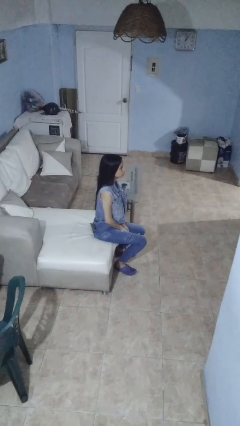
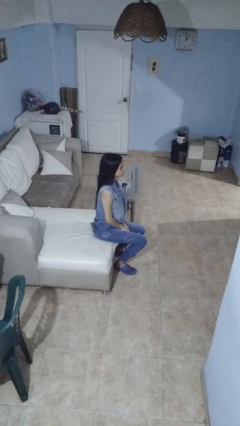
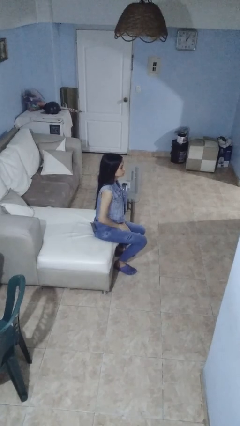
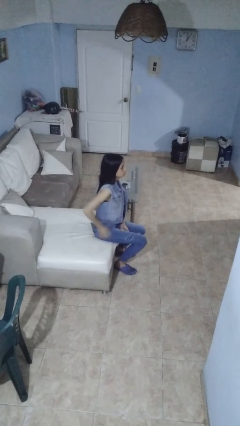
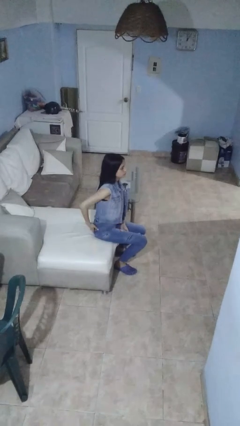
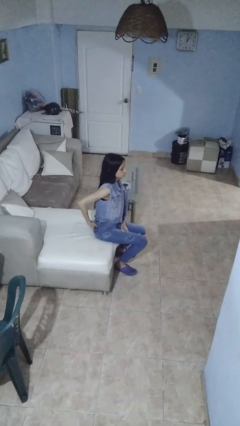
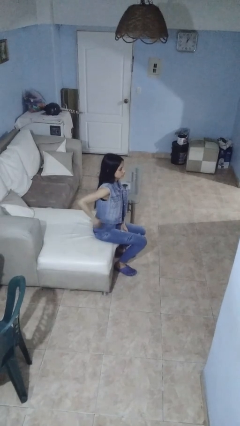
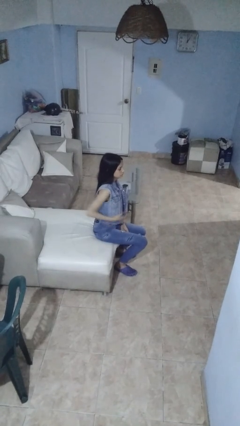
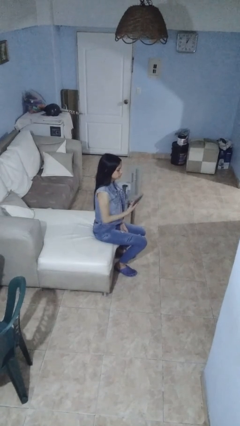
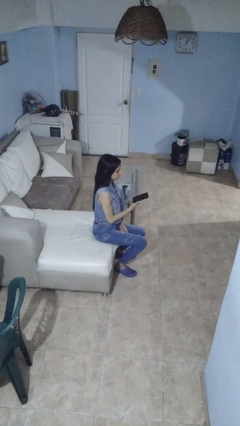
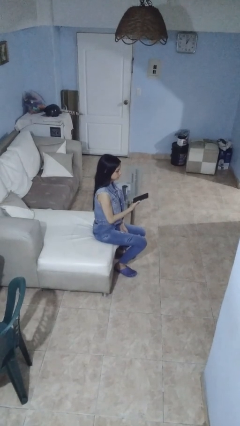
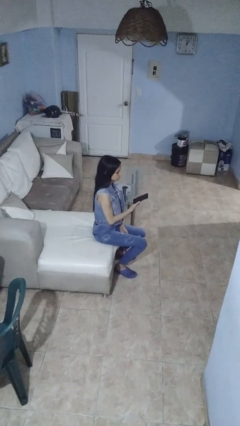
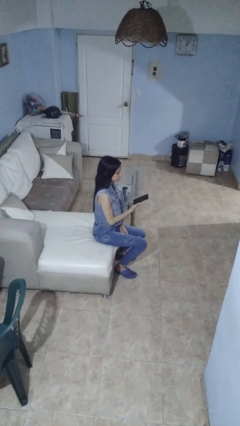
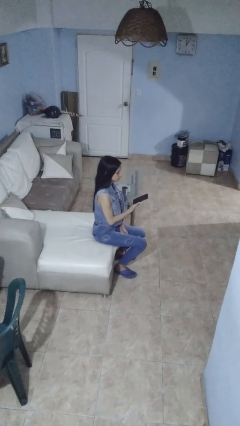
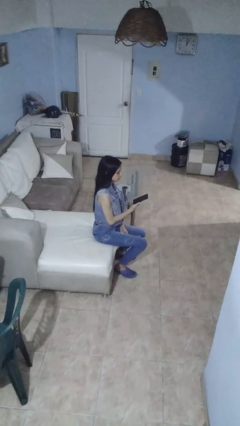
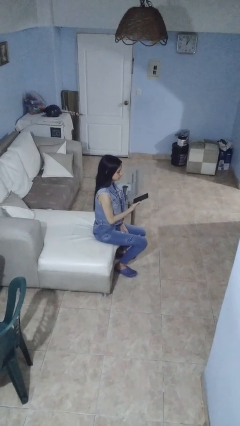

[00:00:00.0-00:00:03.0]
person takes phone from pocket

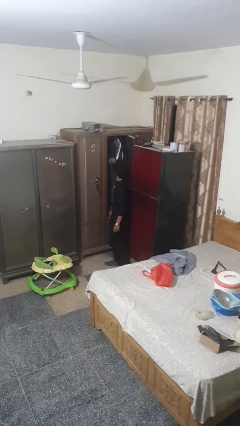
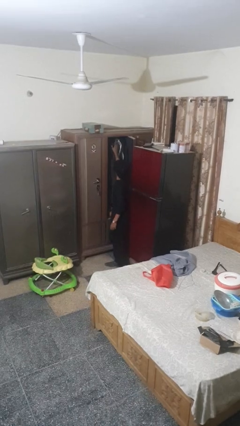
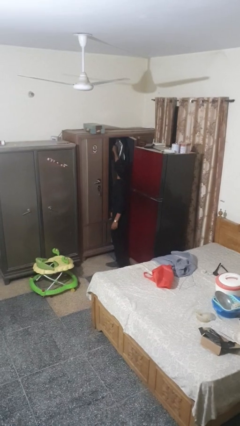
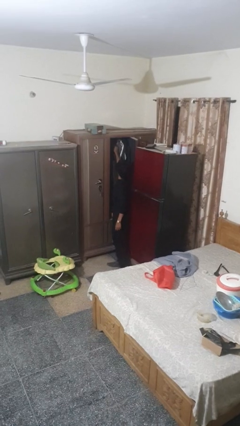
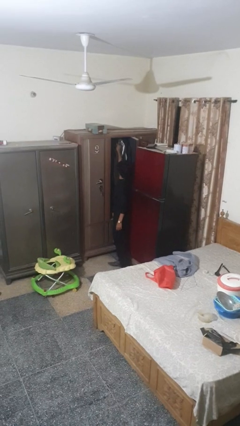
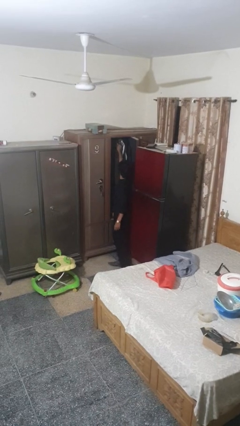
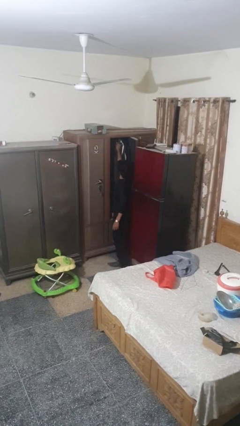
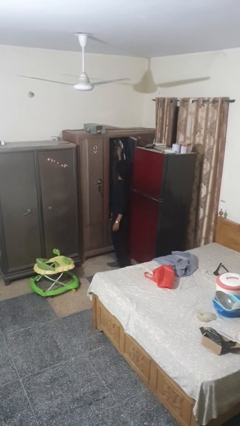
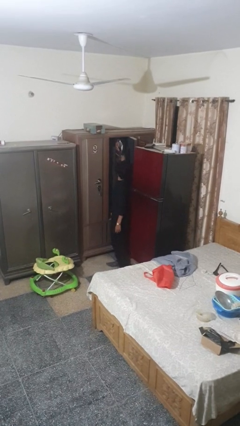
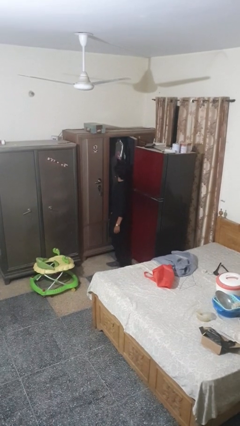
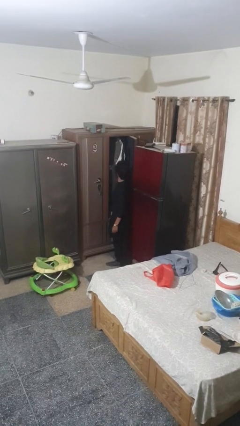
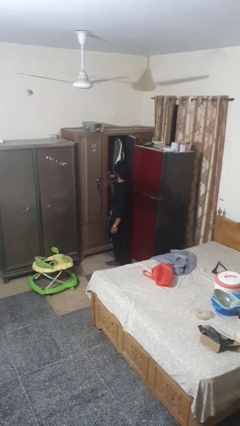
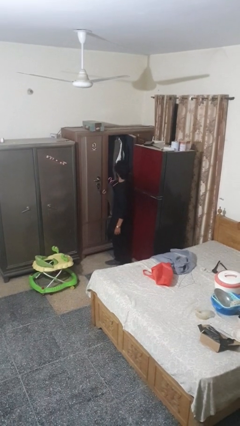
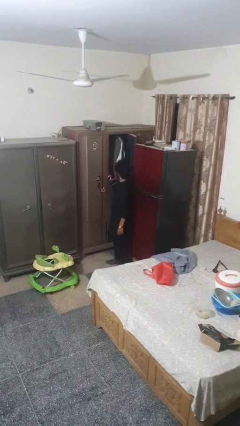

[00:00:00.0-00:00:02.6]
person takes clothes from closet

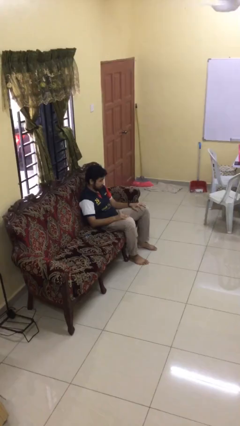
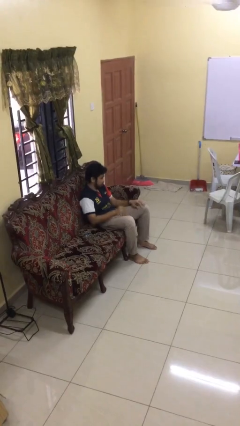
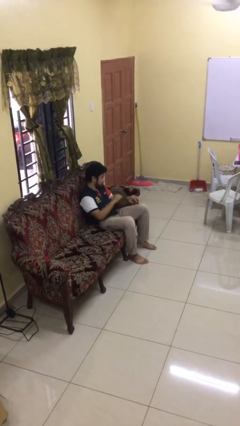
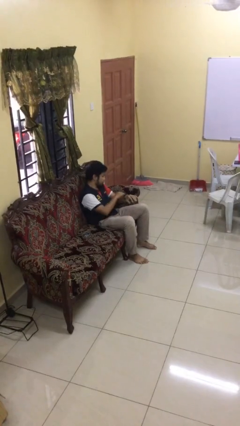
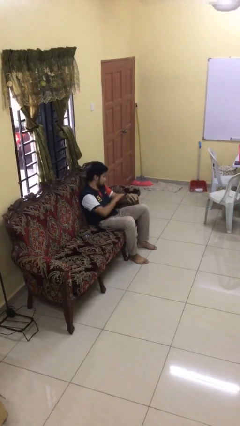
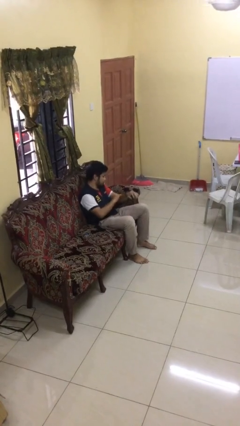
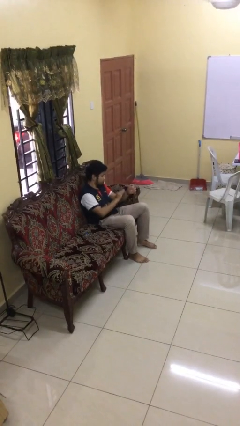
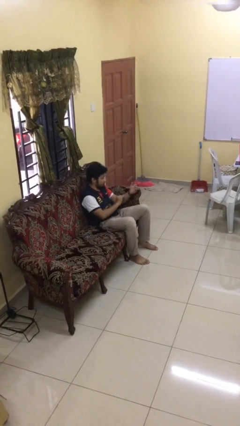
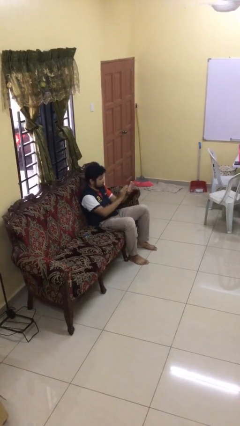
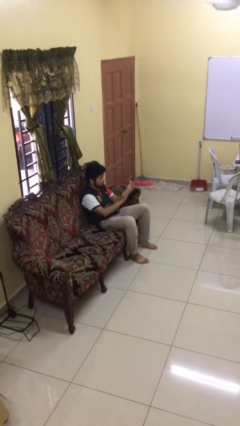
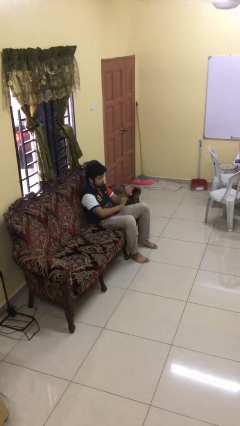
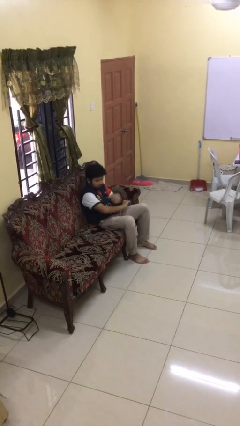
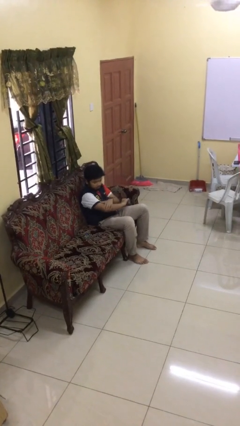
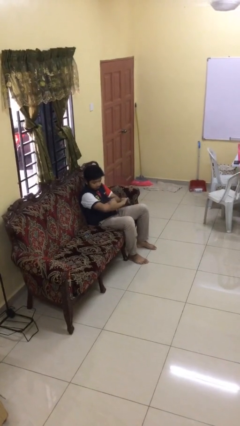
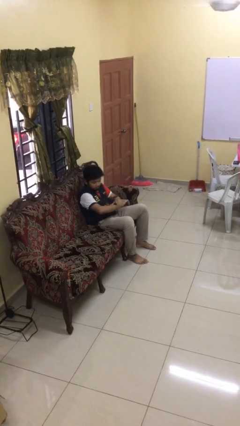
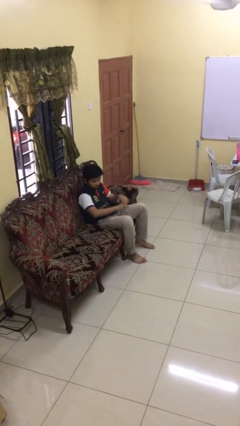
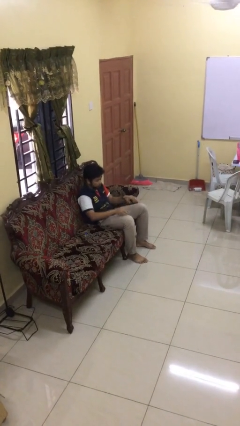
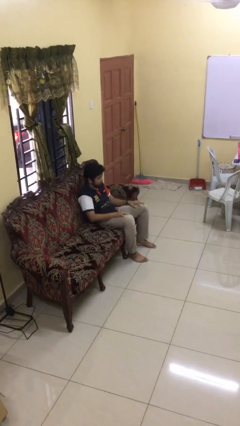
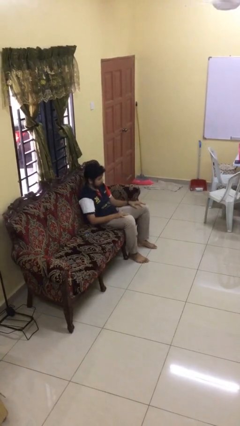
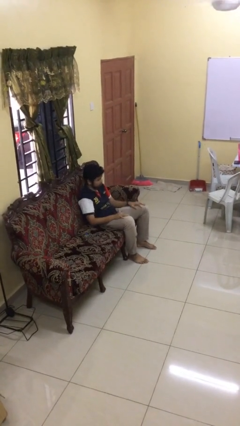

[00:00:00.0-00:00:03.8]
person looks at hands in lap

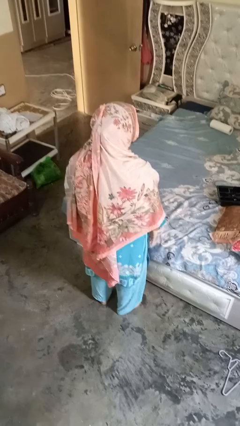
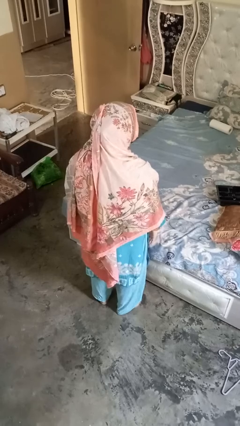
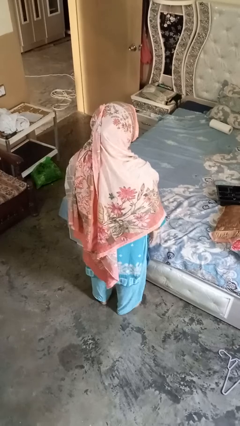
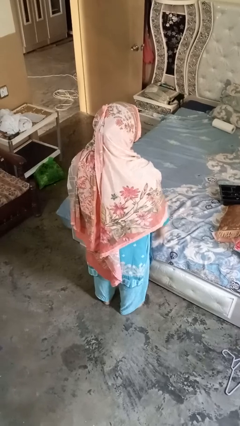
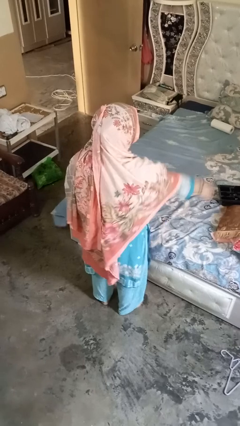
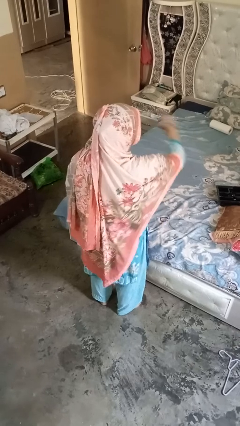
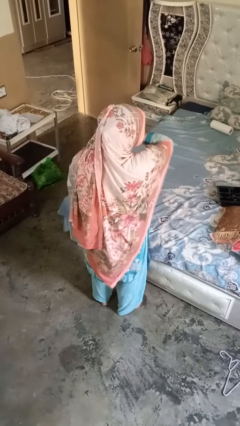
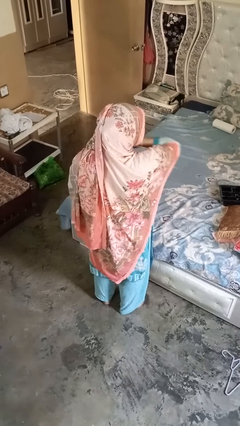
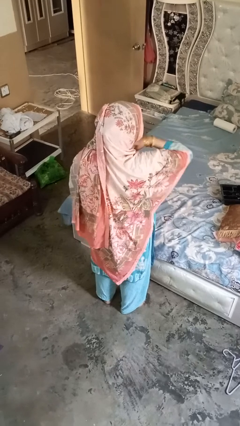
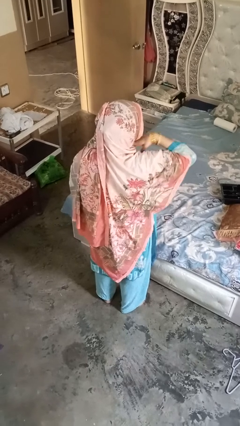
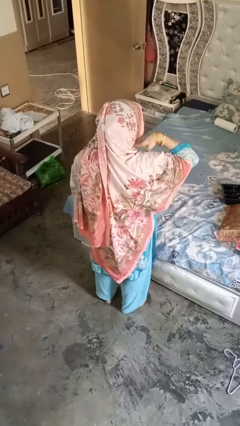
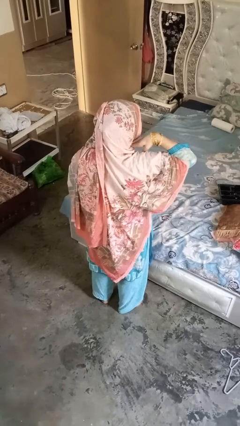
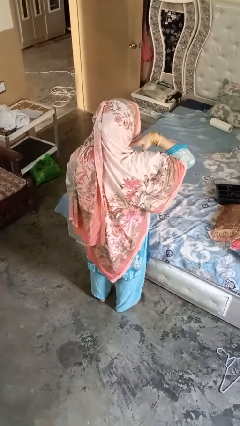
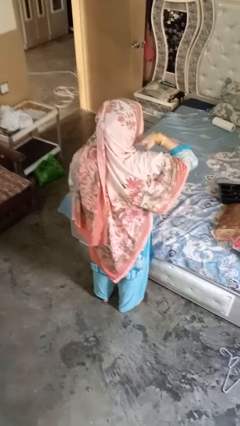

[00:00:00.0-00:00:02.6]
person gestures cut

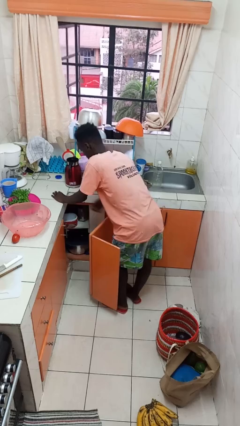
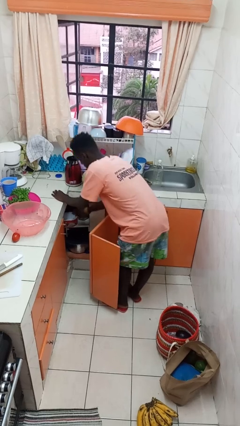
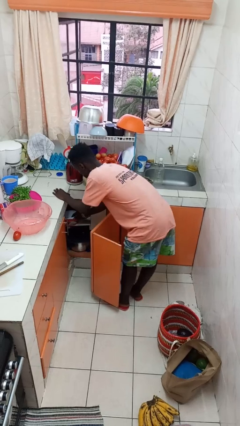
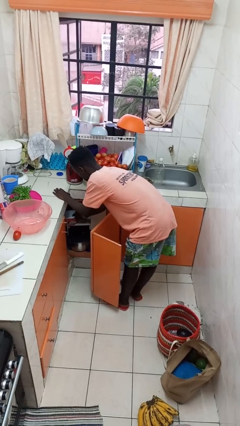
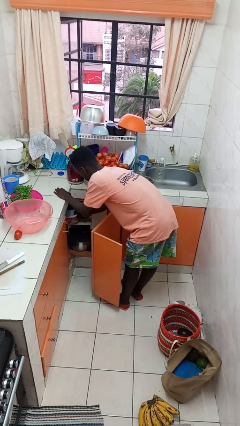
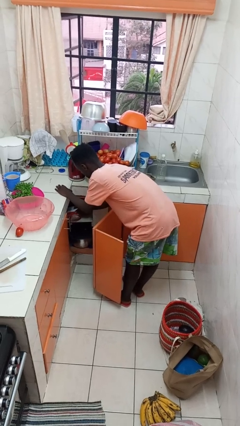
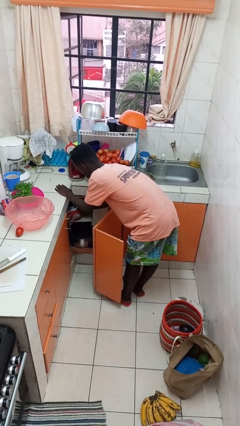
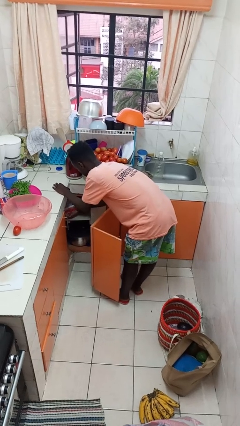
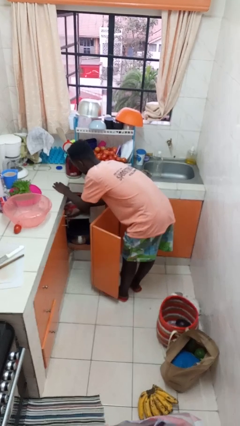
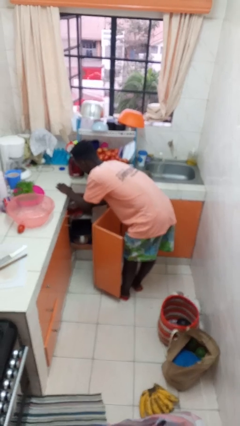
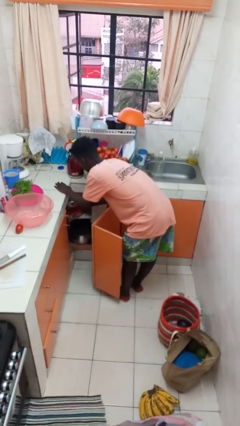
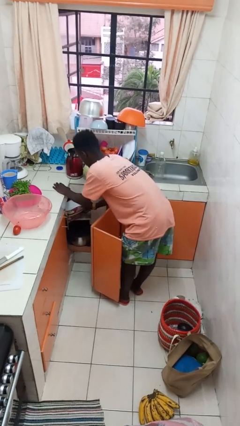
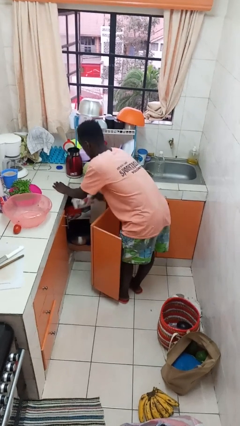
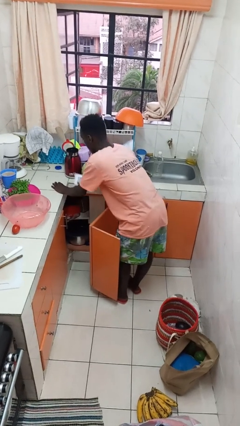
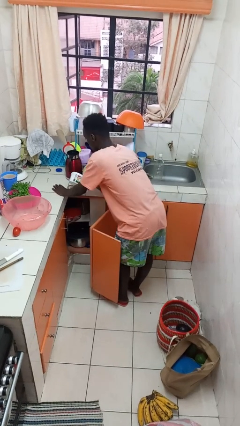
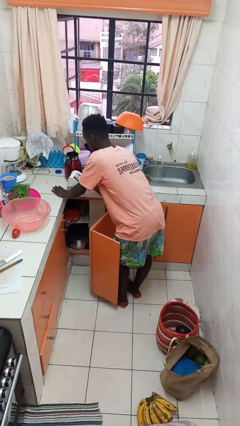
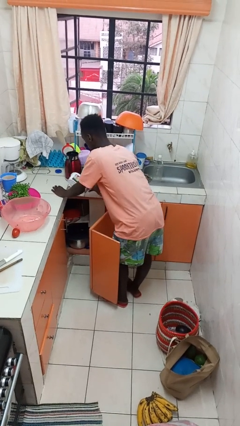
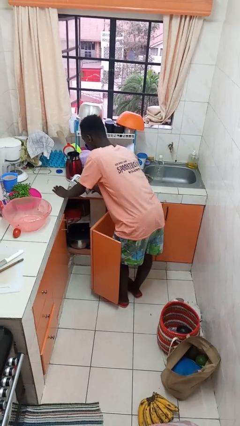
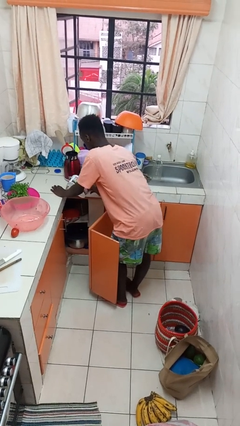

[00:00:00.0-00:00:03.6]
person takes object from cabinet

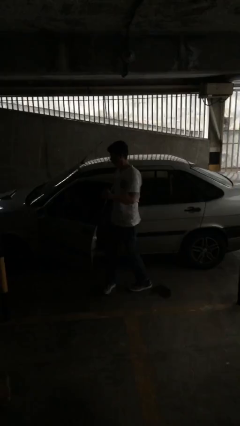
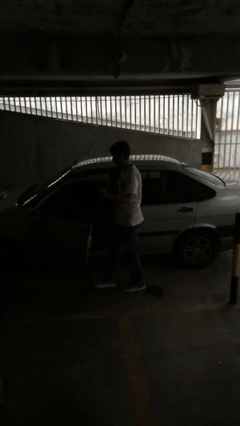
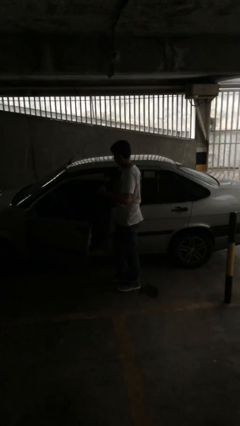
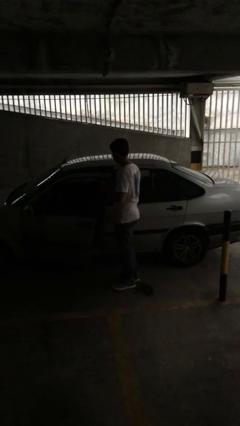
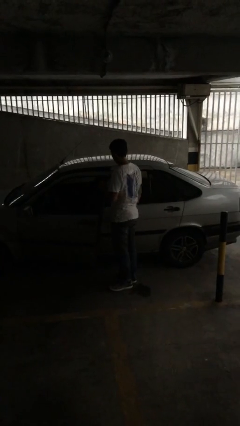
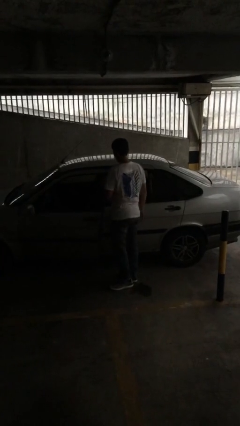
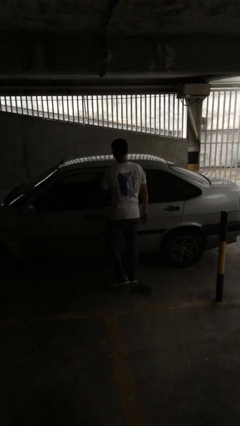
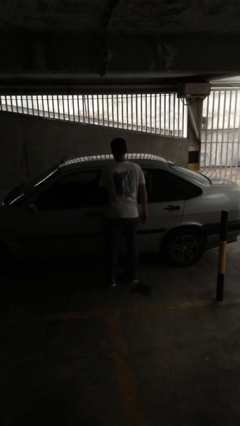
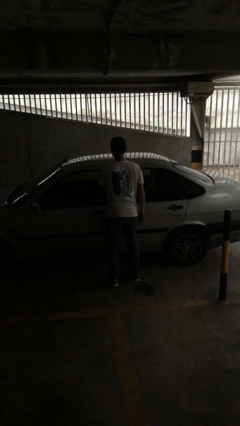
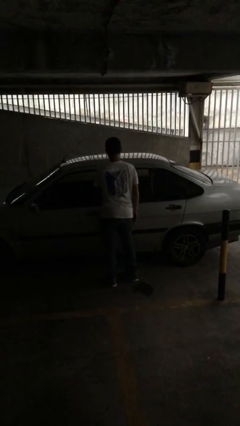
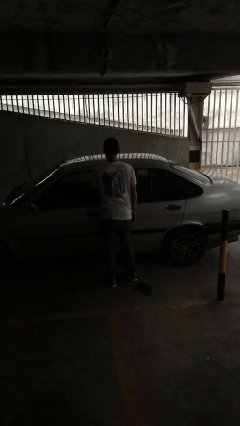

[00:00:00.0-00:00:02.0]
person closes car door
